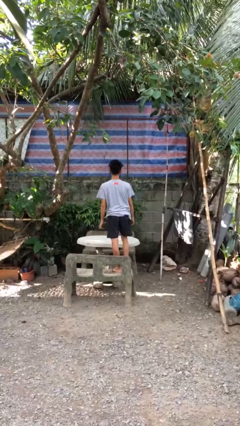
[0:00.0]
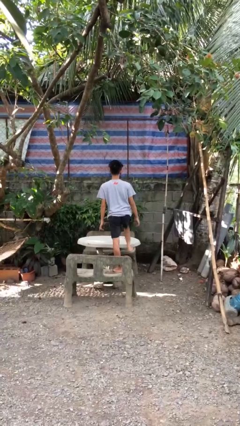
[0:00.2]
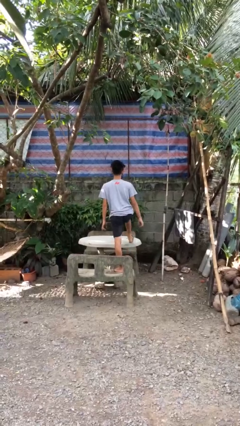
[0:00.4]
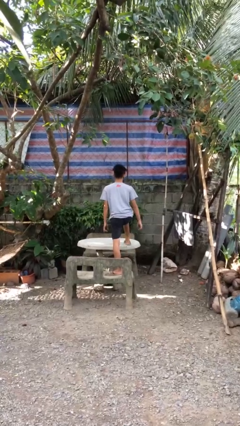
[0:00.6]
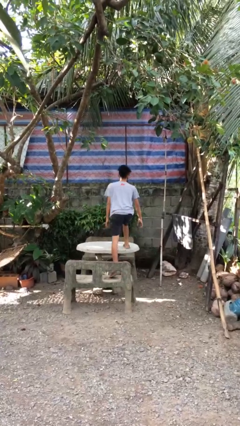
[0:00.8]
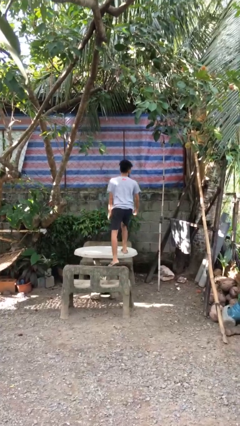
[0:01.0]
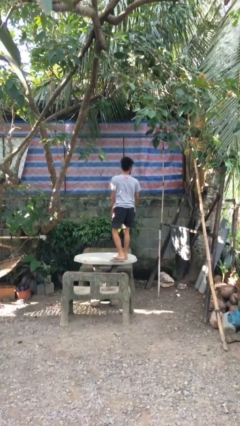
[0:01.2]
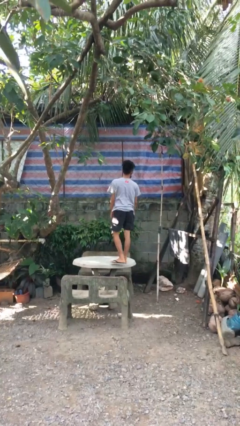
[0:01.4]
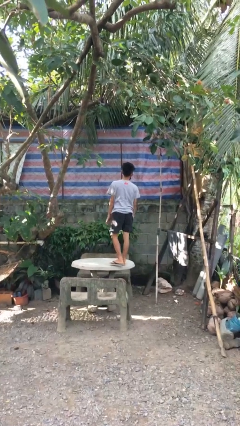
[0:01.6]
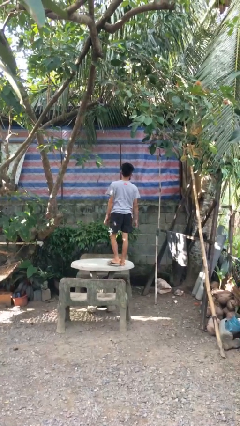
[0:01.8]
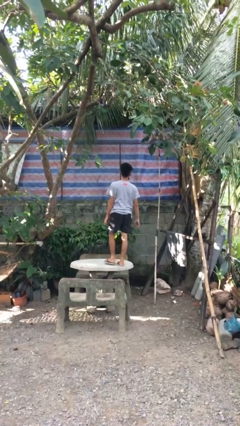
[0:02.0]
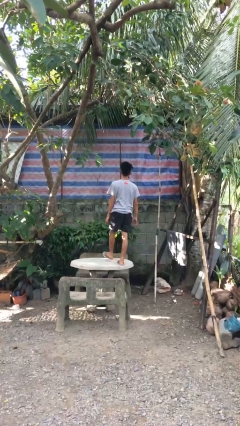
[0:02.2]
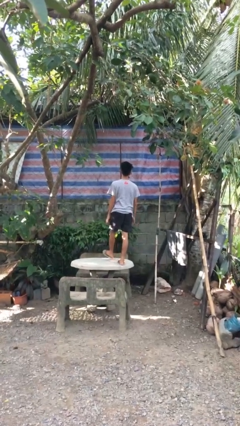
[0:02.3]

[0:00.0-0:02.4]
person climbs on table

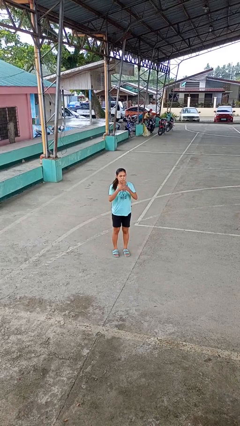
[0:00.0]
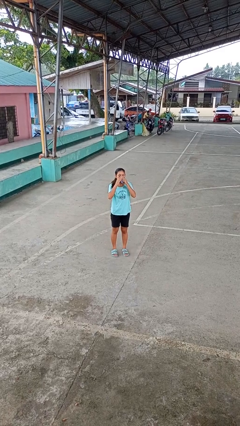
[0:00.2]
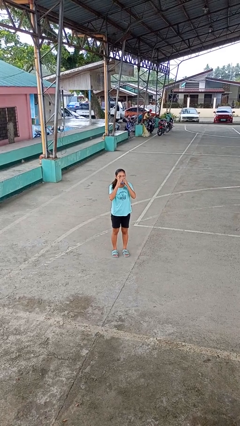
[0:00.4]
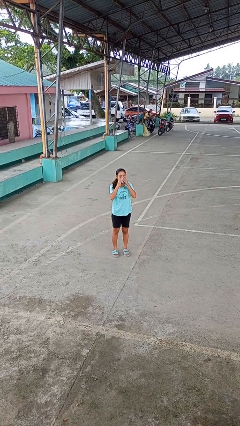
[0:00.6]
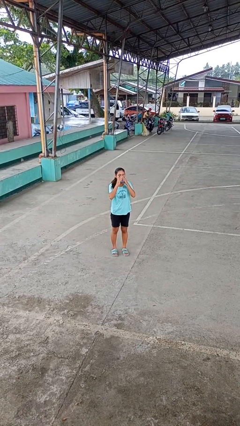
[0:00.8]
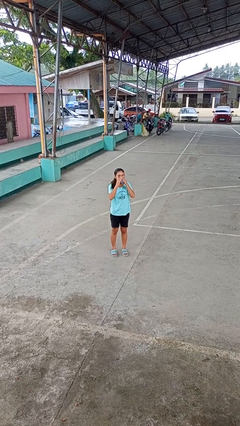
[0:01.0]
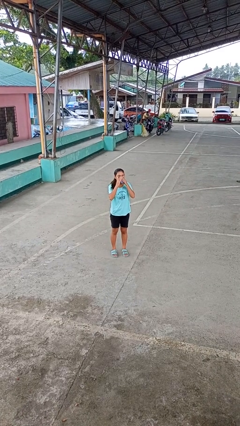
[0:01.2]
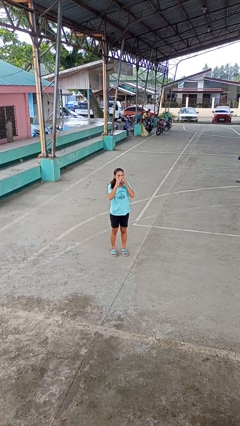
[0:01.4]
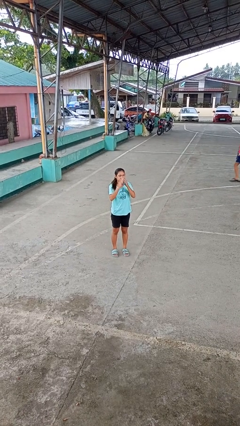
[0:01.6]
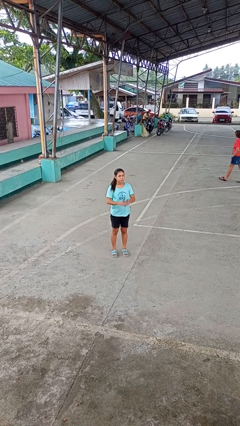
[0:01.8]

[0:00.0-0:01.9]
person blows nose

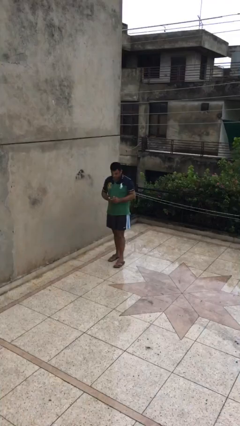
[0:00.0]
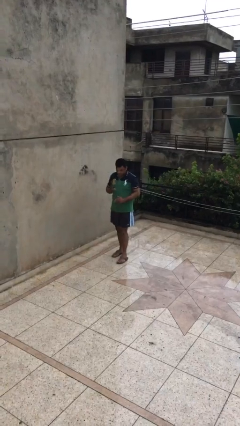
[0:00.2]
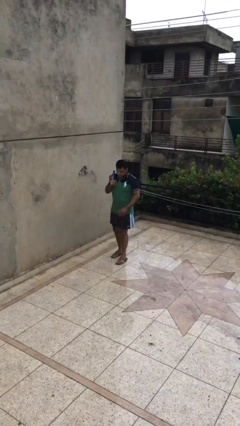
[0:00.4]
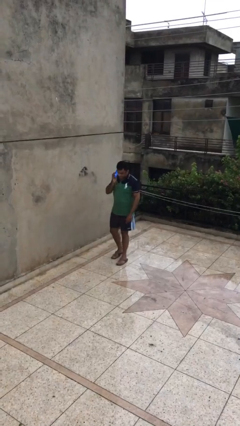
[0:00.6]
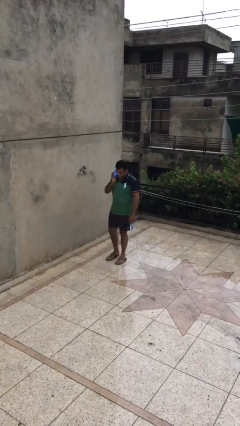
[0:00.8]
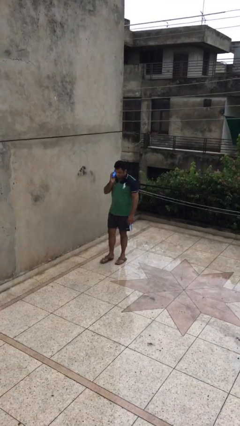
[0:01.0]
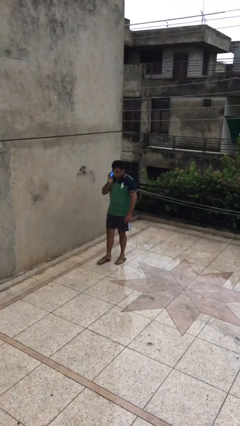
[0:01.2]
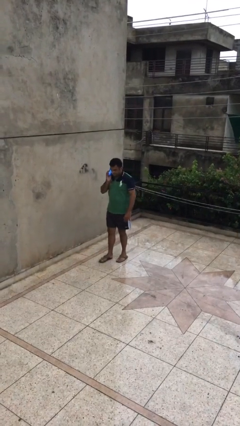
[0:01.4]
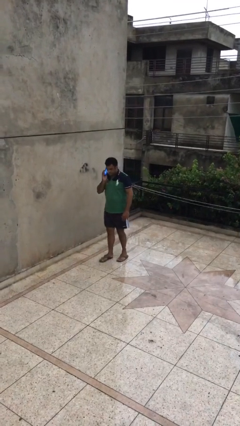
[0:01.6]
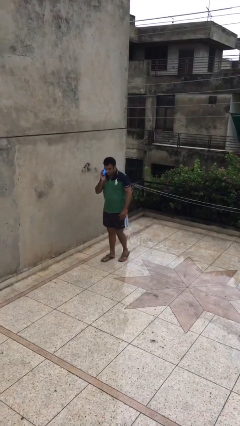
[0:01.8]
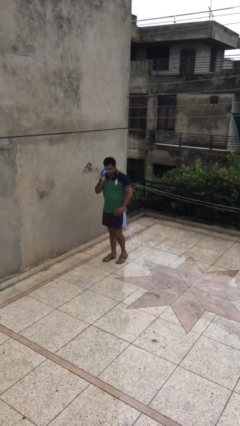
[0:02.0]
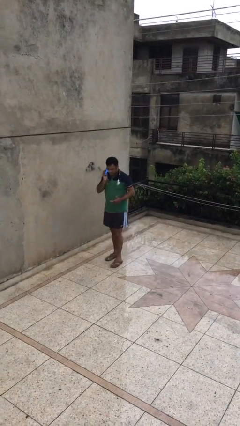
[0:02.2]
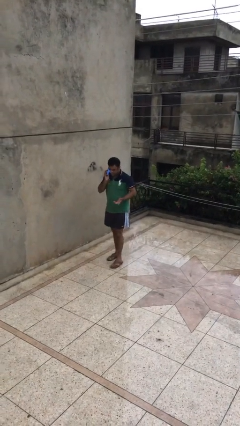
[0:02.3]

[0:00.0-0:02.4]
person talks on phone

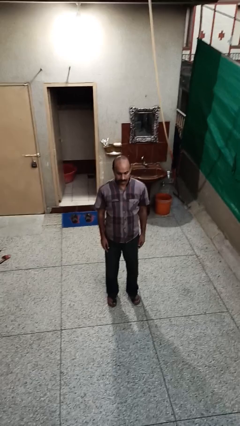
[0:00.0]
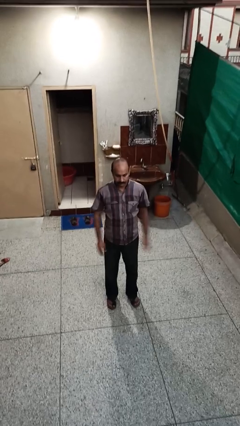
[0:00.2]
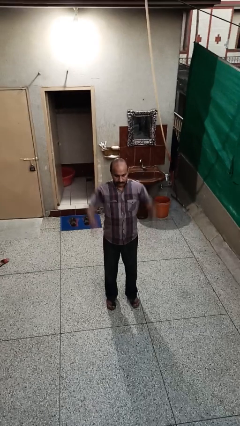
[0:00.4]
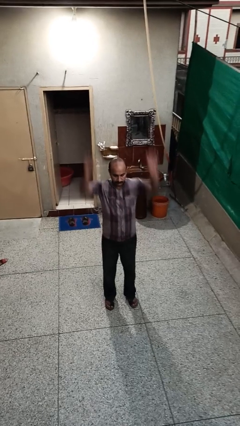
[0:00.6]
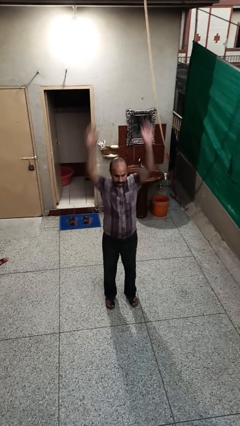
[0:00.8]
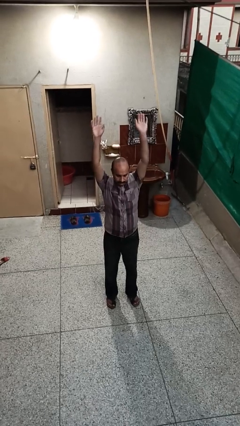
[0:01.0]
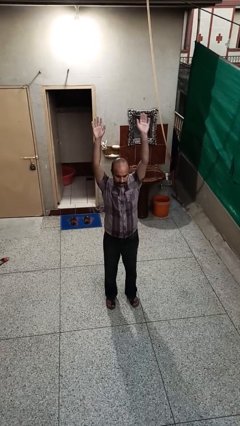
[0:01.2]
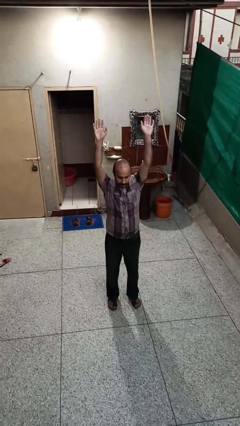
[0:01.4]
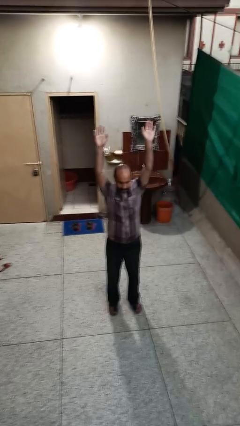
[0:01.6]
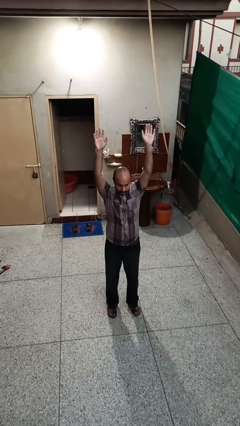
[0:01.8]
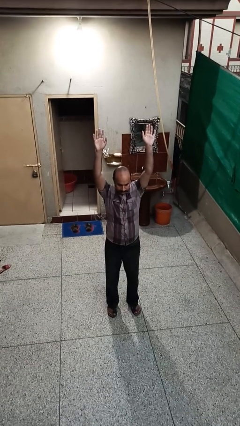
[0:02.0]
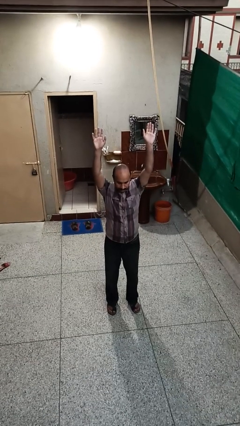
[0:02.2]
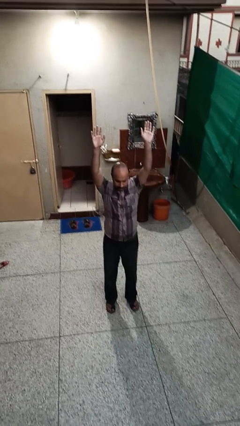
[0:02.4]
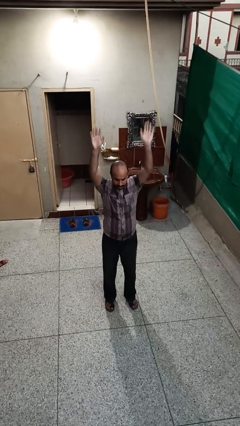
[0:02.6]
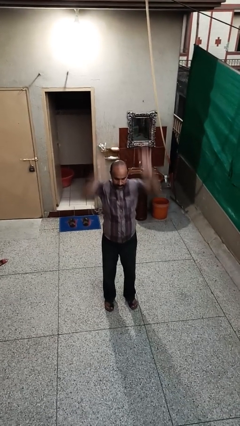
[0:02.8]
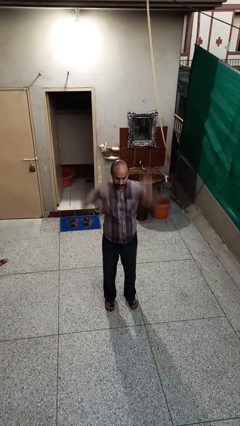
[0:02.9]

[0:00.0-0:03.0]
person stretches arms over head

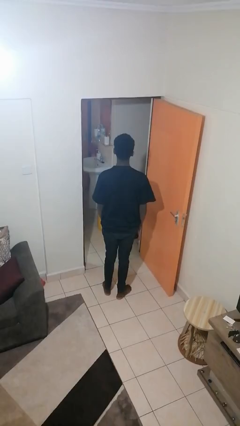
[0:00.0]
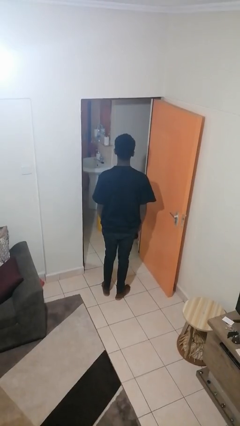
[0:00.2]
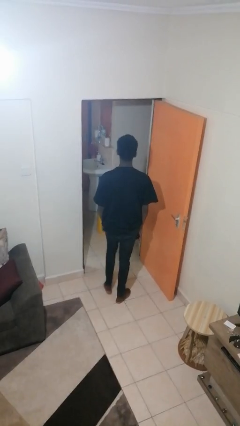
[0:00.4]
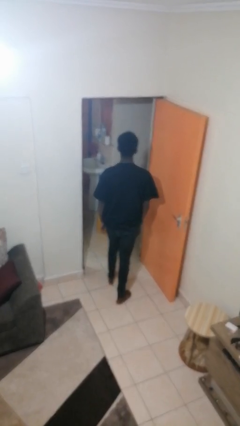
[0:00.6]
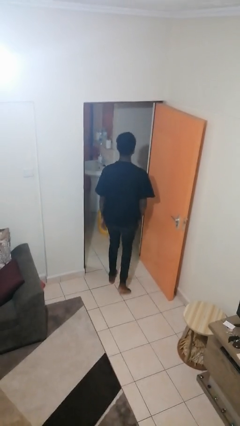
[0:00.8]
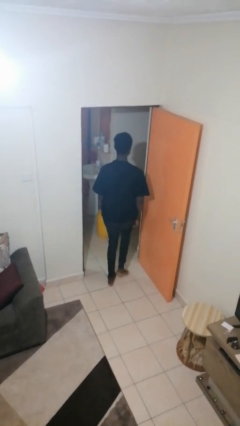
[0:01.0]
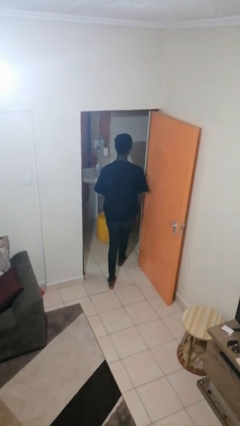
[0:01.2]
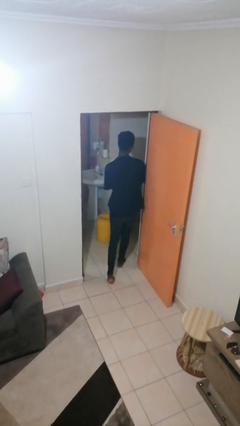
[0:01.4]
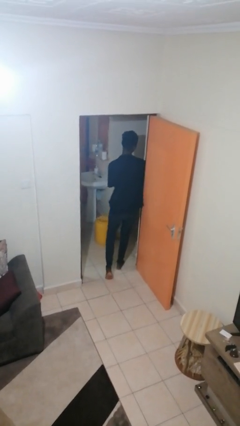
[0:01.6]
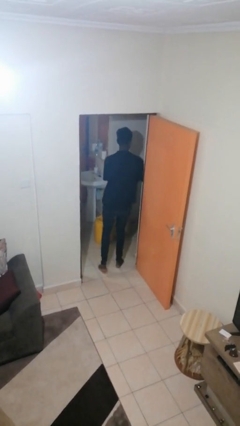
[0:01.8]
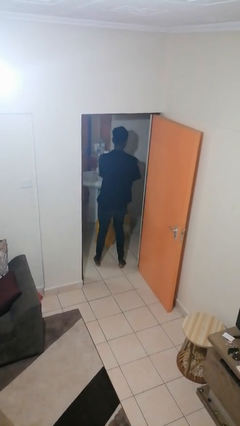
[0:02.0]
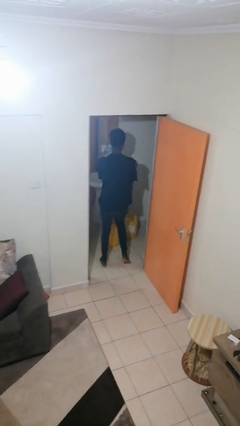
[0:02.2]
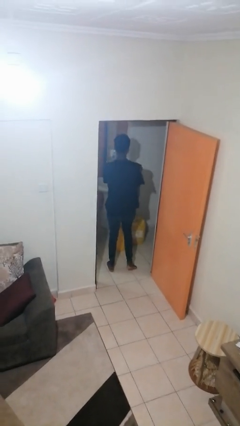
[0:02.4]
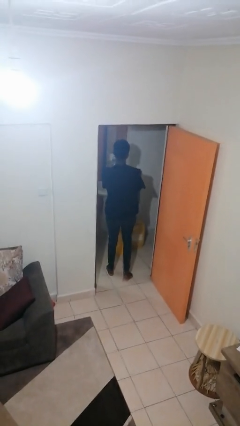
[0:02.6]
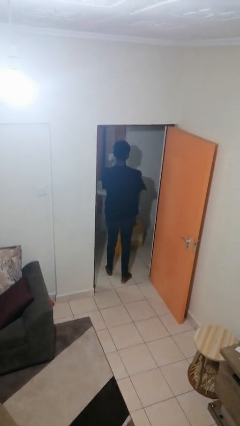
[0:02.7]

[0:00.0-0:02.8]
person bumps into wall

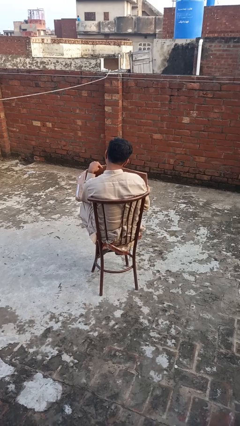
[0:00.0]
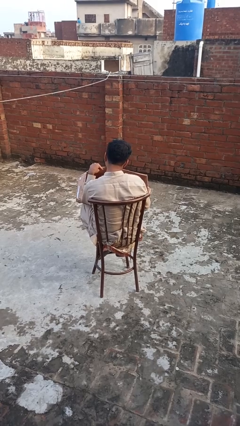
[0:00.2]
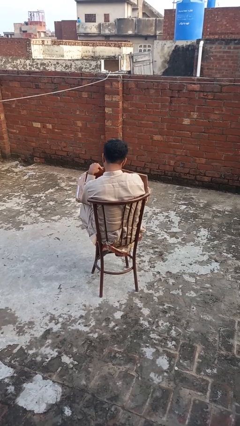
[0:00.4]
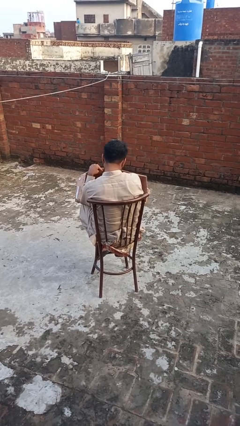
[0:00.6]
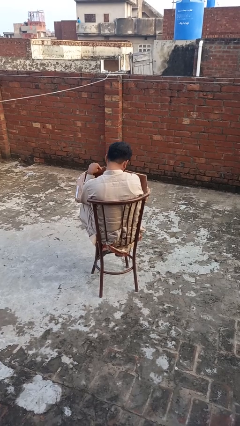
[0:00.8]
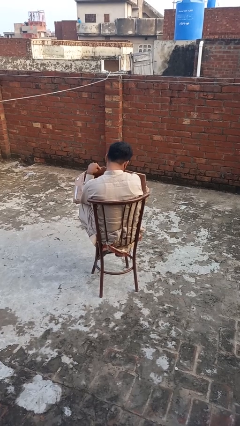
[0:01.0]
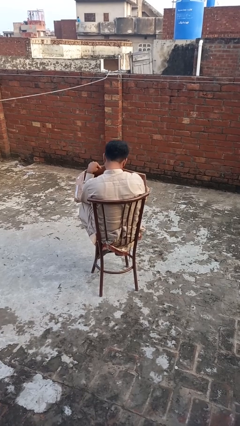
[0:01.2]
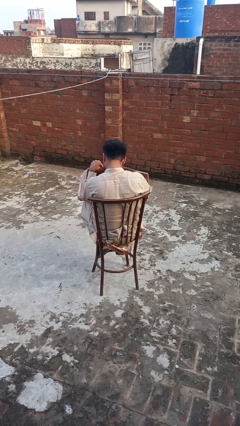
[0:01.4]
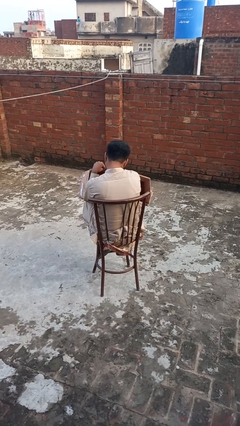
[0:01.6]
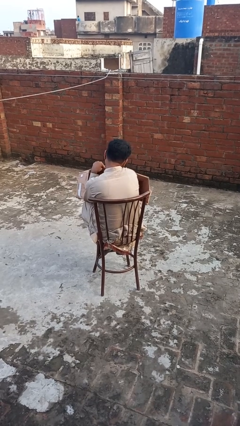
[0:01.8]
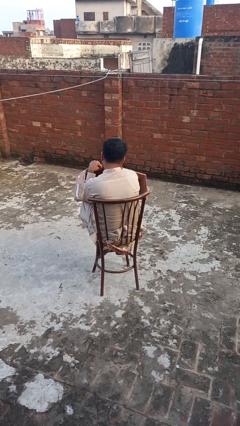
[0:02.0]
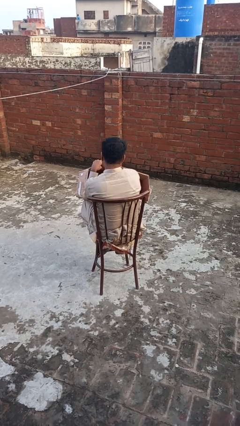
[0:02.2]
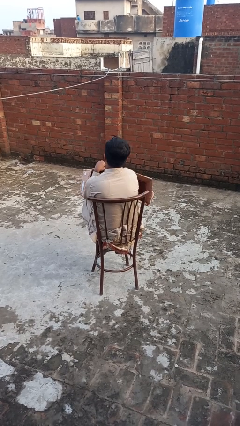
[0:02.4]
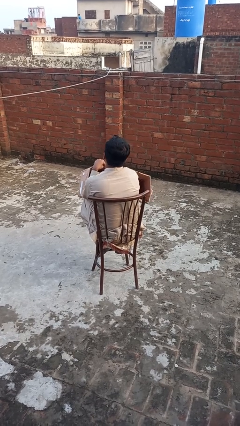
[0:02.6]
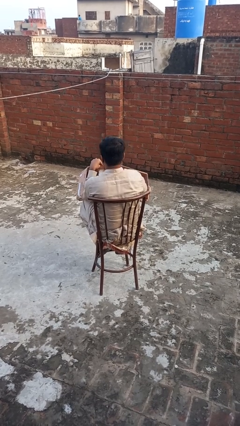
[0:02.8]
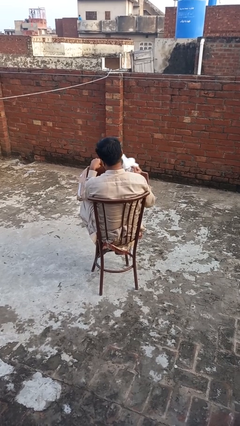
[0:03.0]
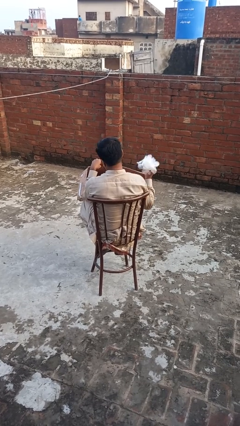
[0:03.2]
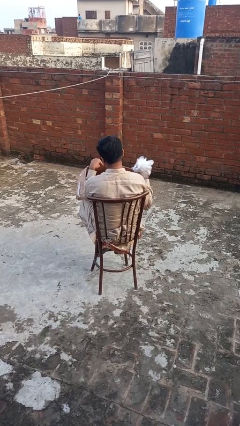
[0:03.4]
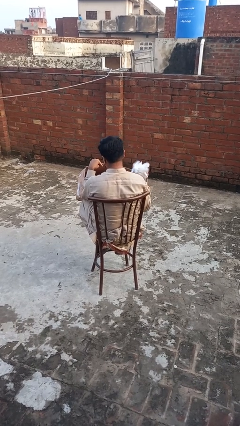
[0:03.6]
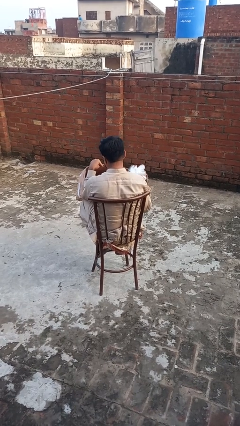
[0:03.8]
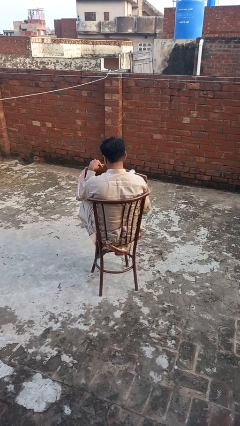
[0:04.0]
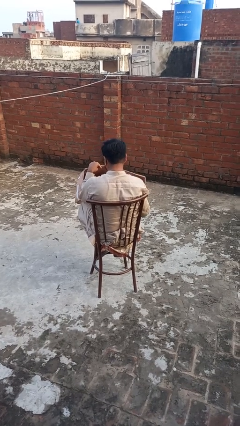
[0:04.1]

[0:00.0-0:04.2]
person searches in box

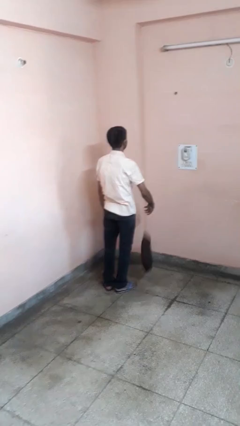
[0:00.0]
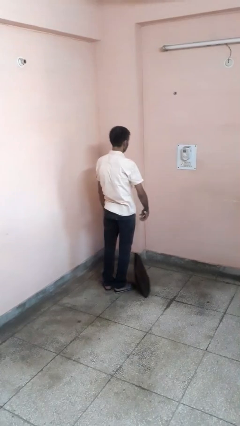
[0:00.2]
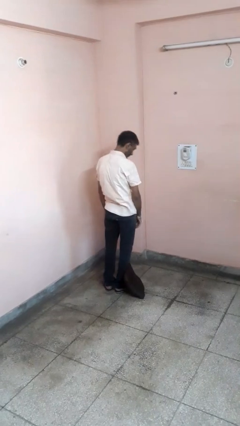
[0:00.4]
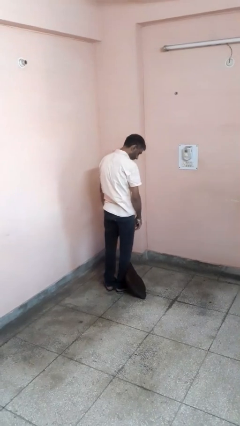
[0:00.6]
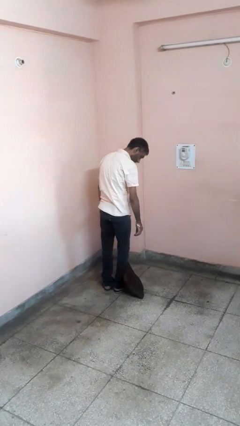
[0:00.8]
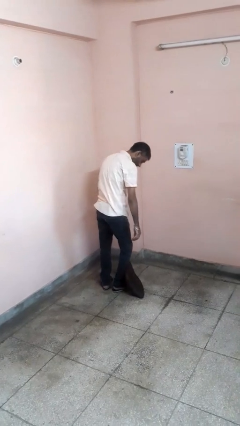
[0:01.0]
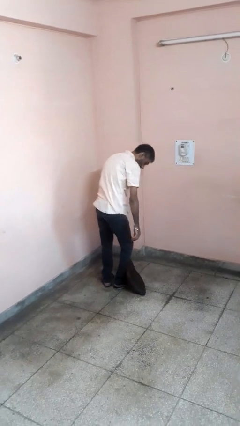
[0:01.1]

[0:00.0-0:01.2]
person throws object to ground
